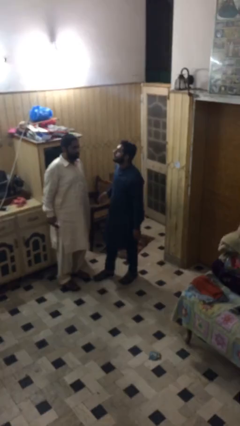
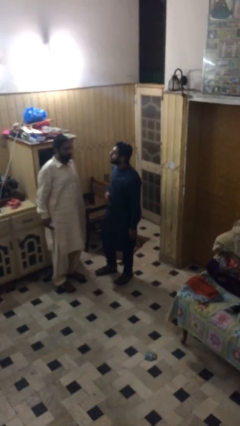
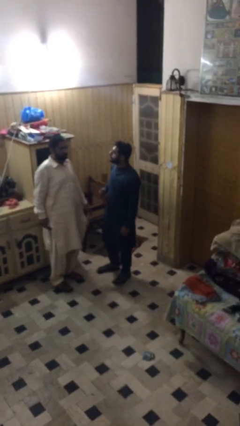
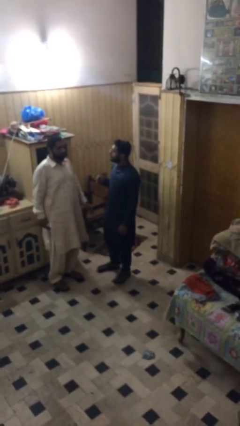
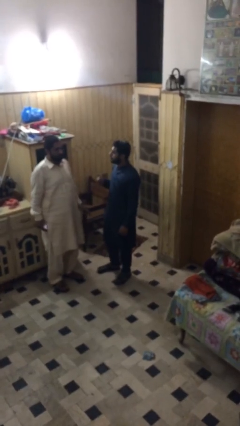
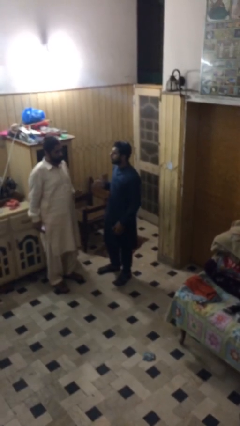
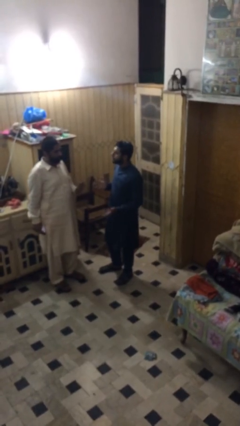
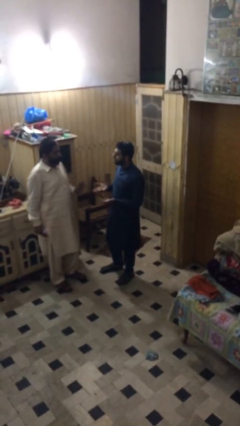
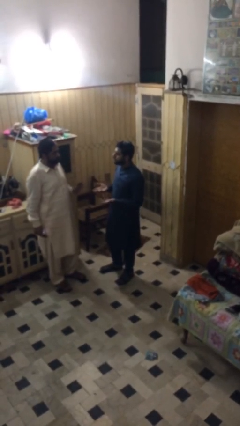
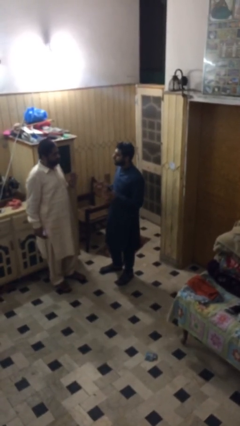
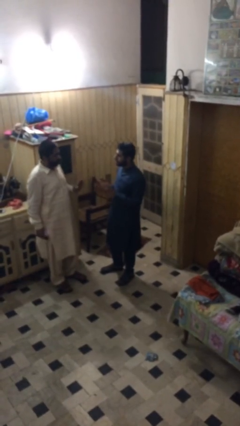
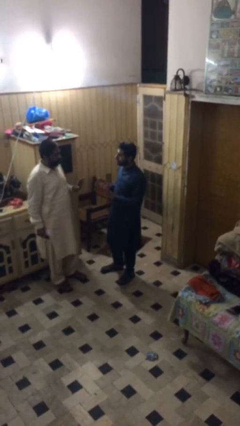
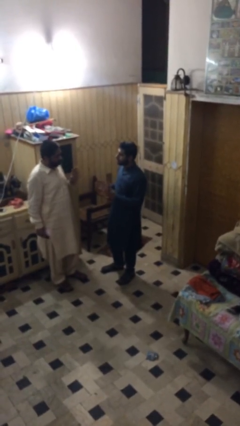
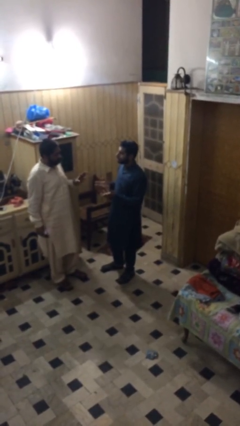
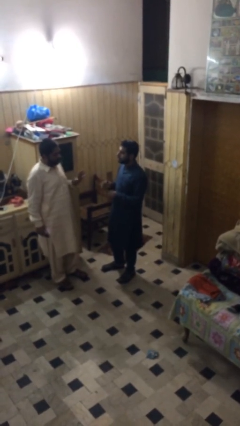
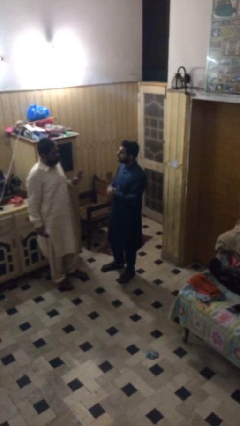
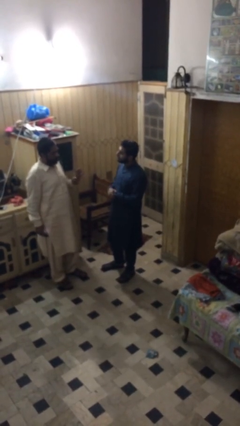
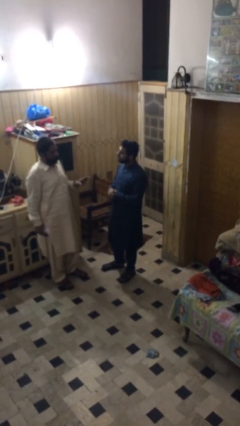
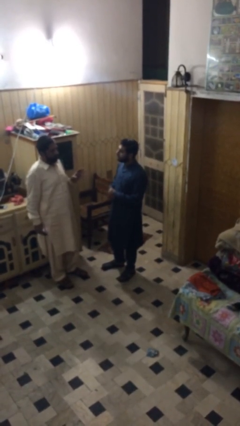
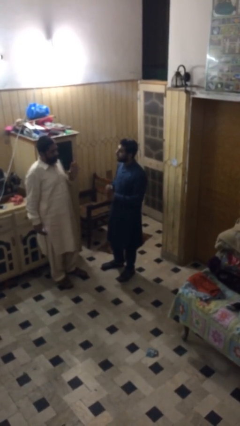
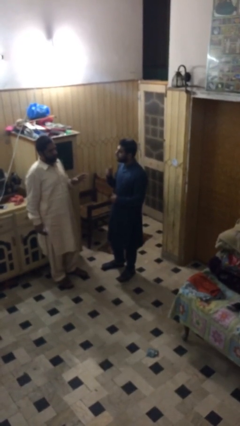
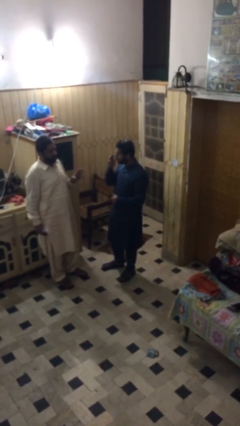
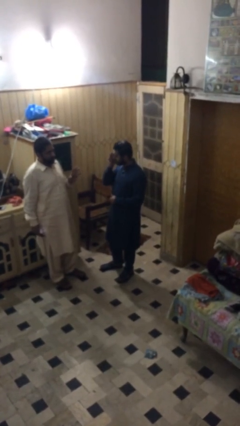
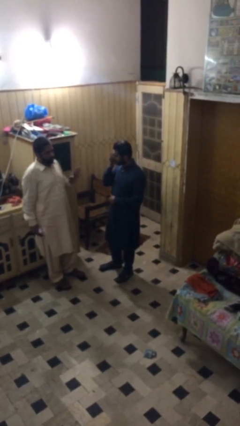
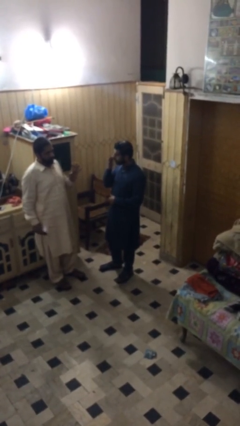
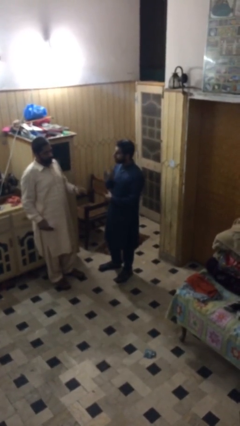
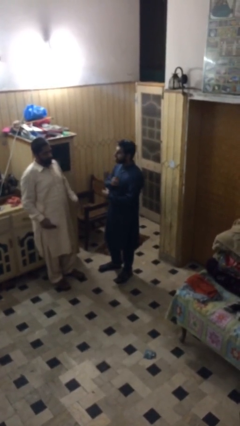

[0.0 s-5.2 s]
person talks to person

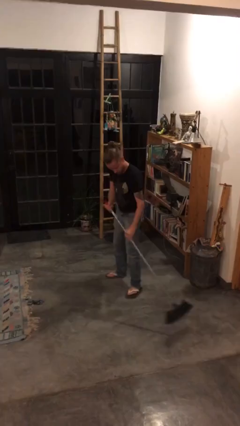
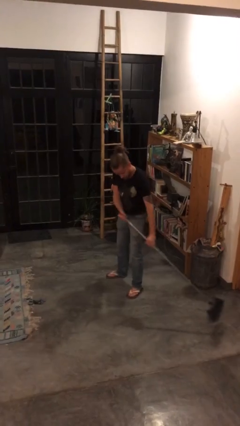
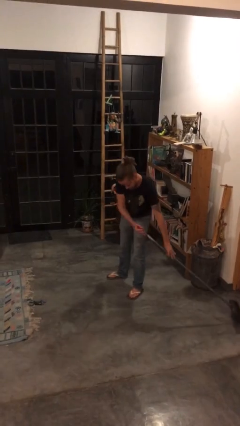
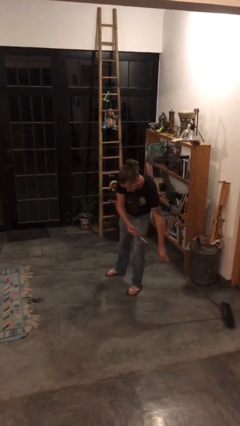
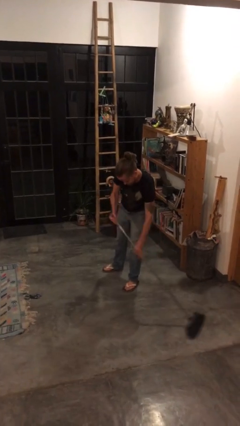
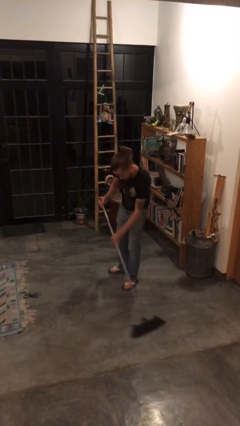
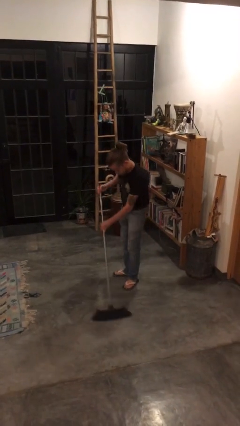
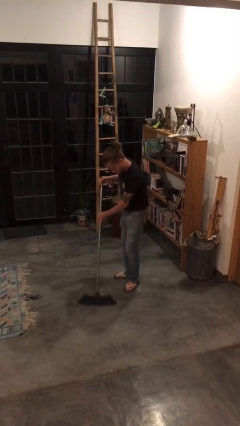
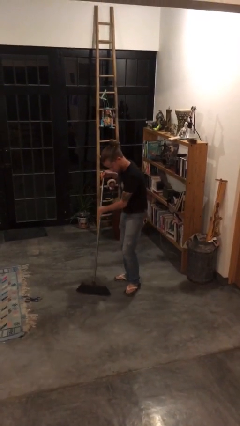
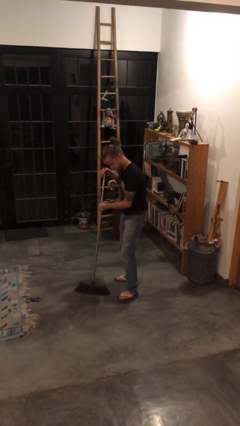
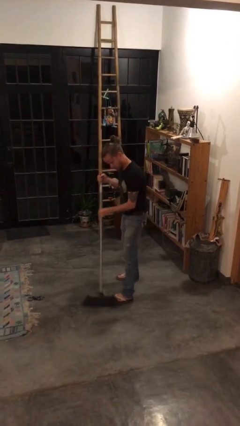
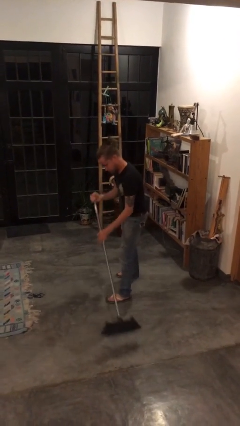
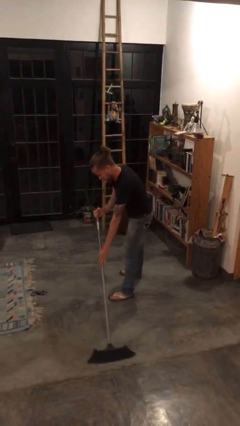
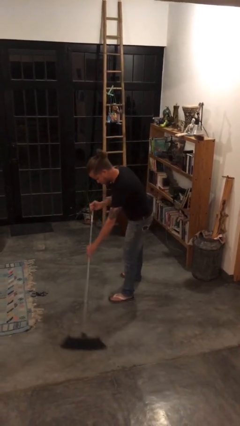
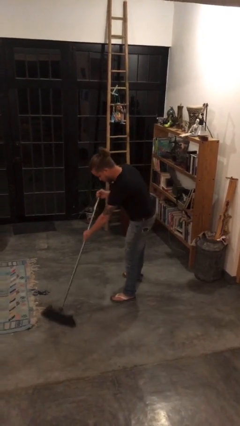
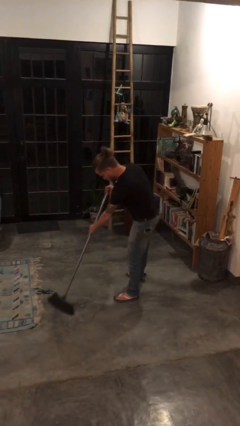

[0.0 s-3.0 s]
person sweeps floor

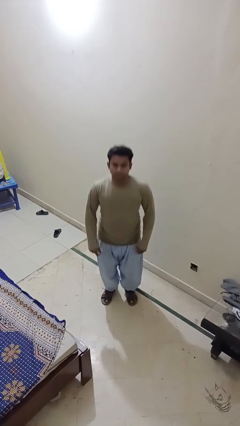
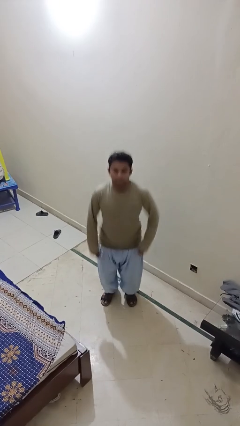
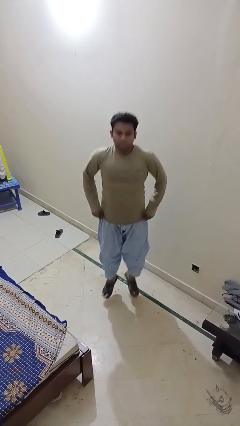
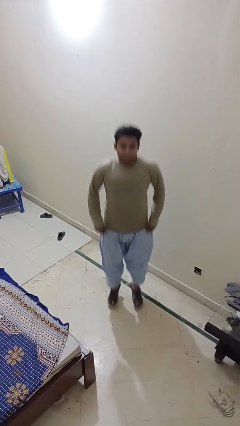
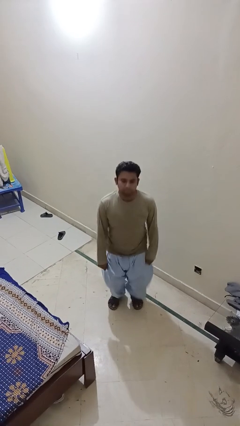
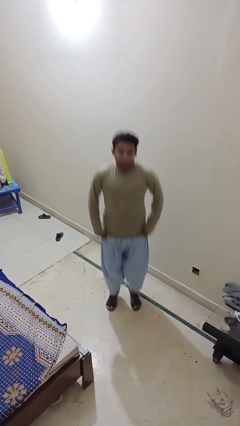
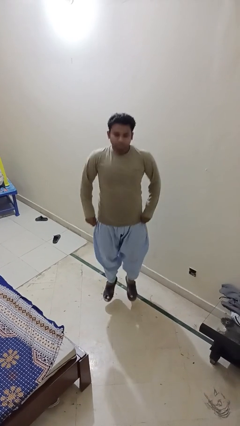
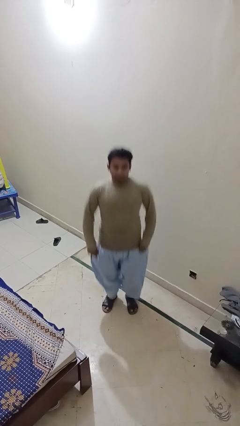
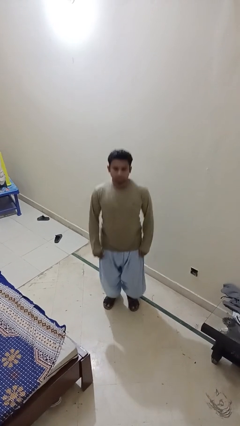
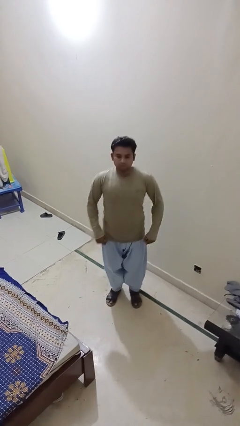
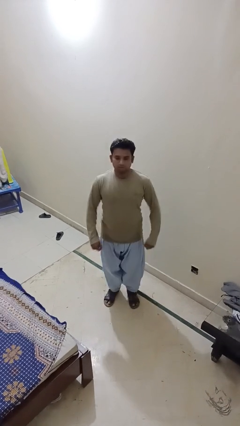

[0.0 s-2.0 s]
person jumps

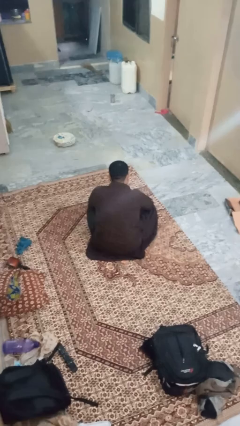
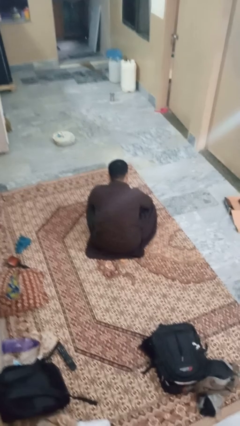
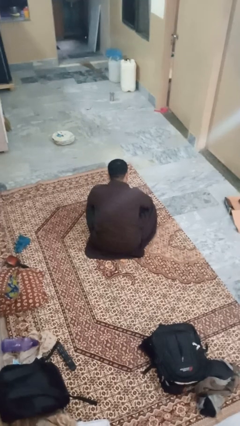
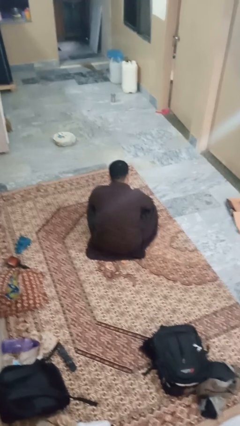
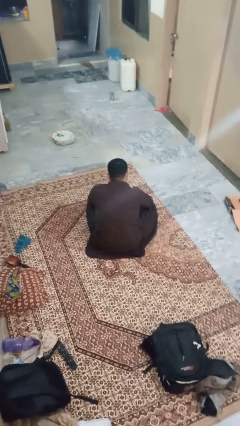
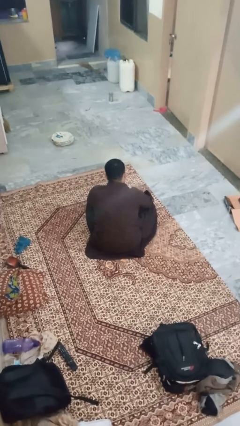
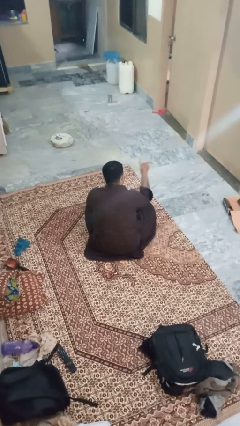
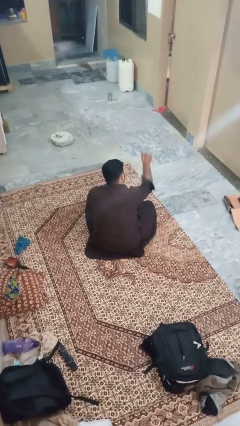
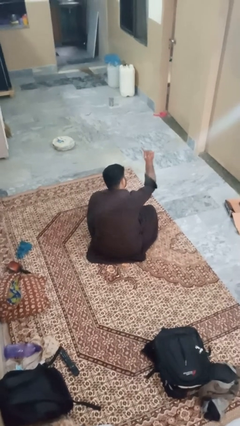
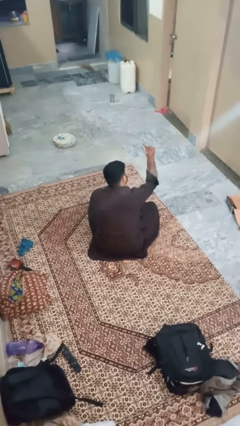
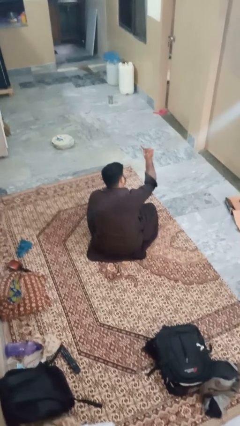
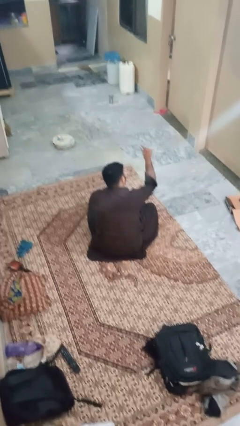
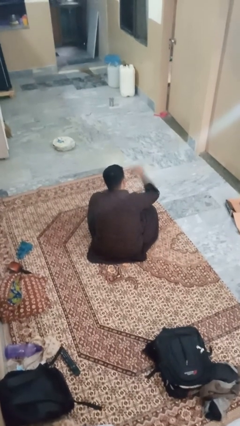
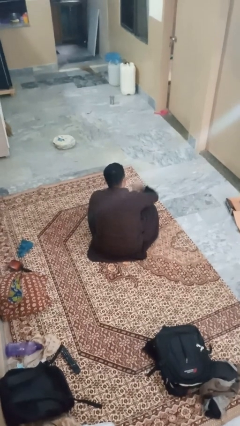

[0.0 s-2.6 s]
person gestures hang loose

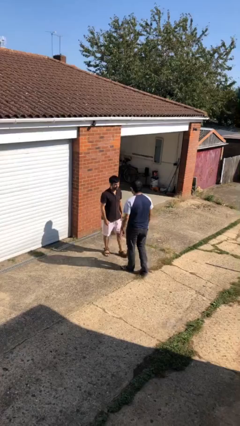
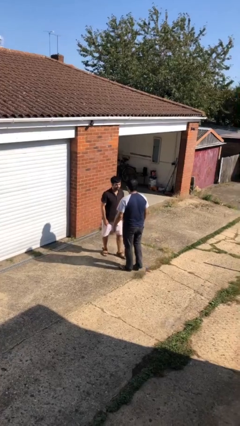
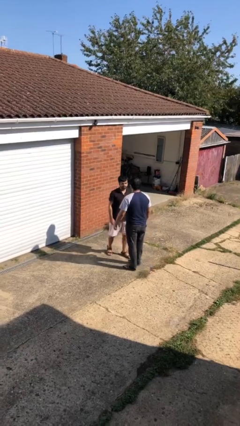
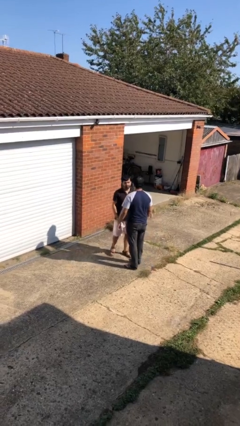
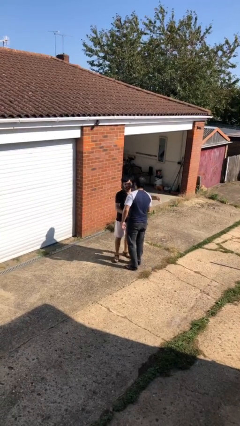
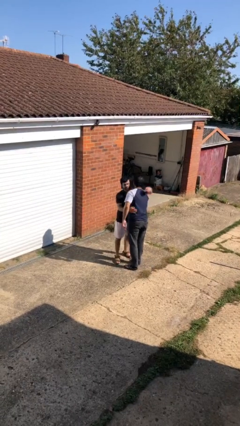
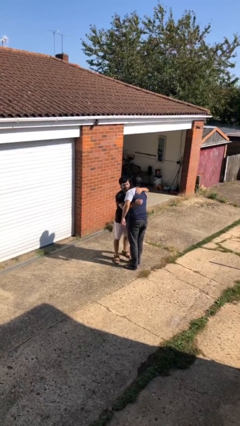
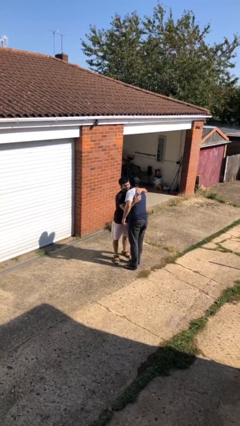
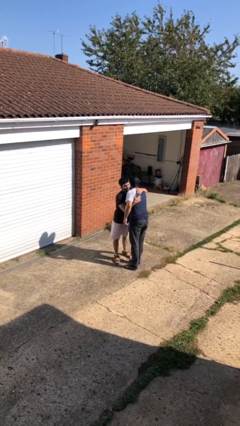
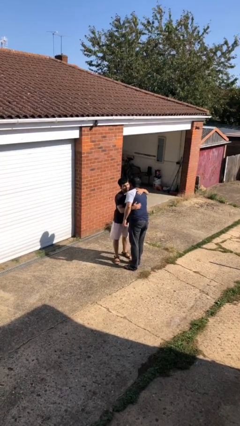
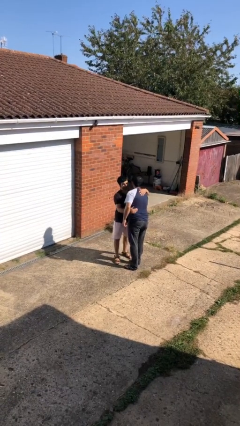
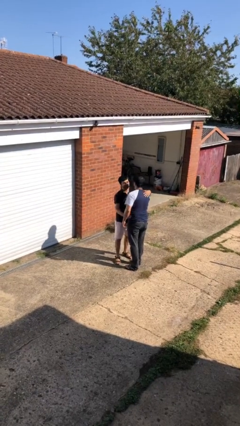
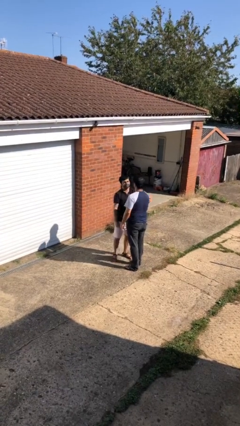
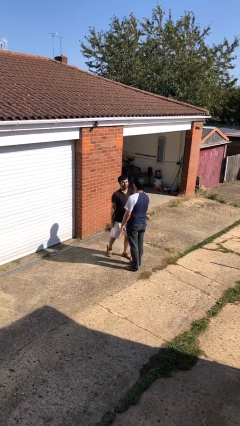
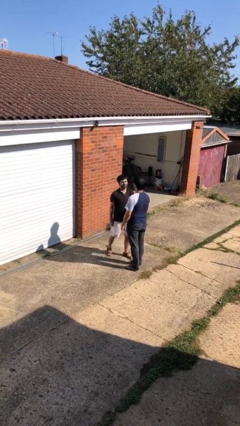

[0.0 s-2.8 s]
person embraces person

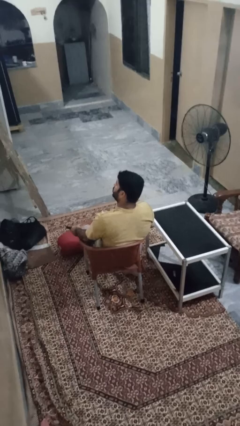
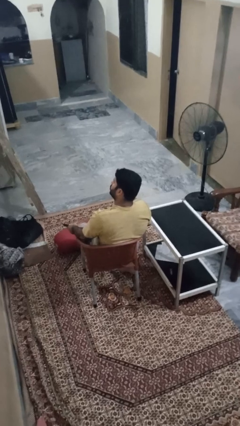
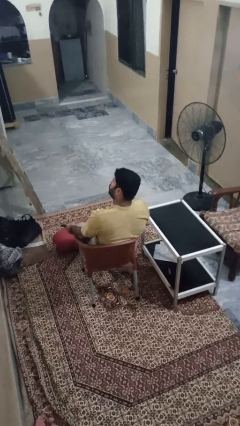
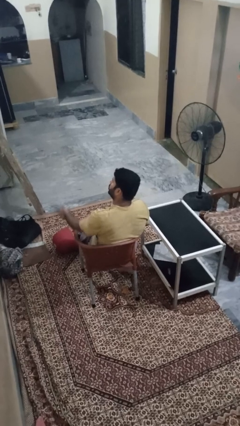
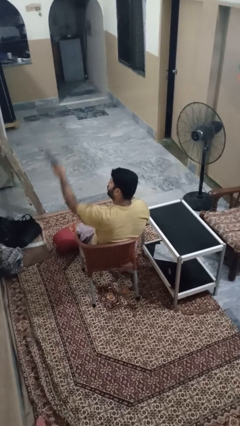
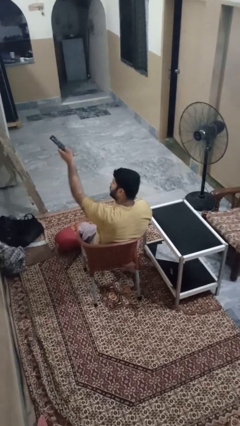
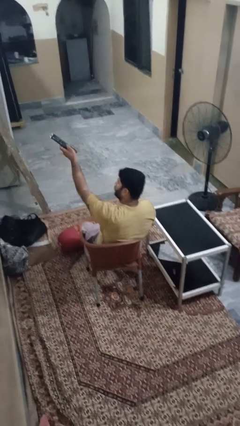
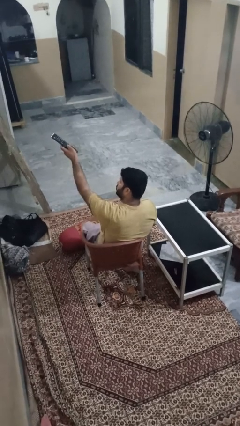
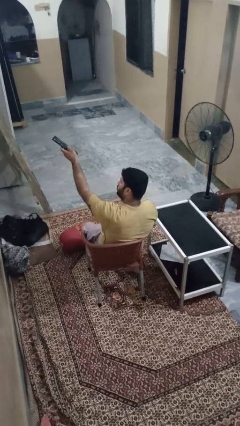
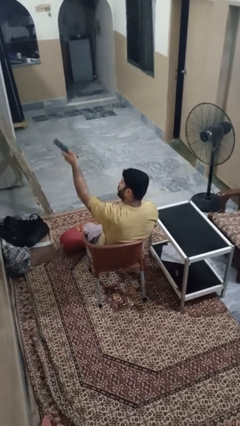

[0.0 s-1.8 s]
person uses television remote
